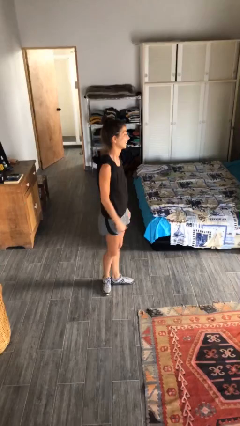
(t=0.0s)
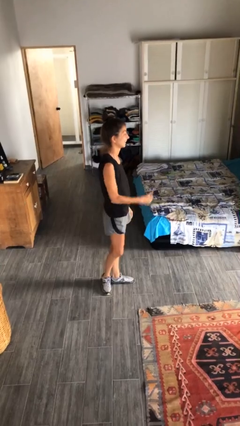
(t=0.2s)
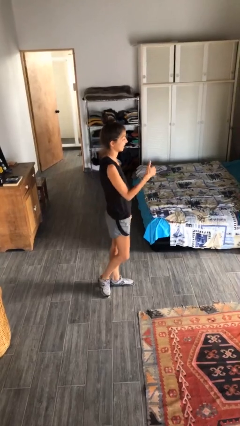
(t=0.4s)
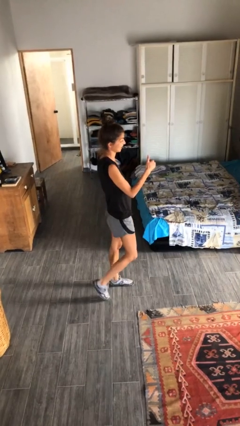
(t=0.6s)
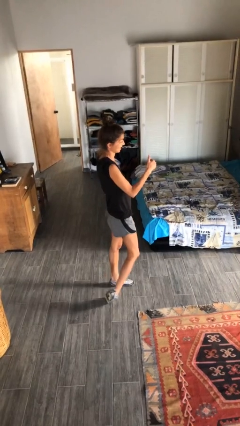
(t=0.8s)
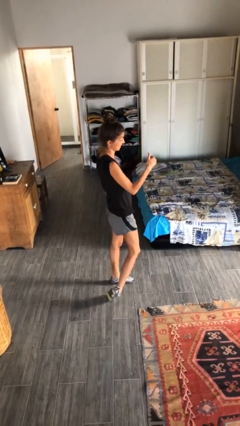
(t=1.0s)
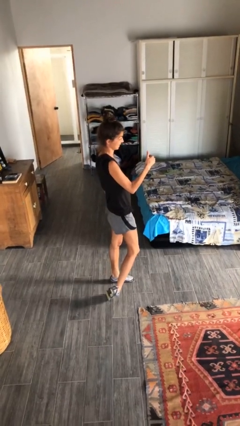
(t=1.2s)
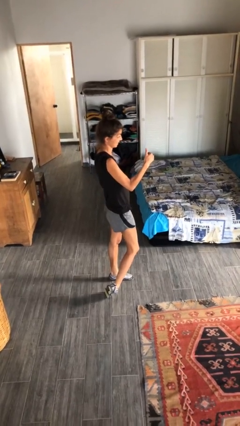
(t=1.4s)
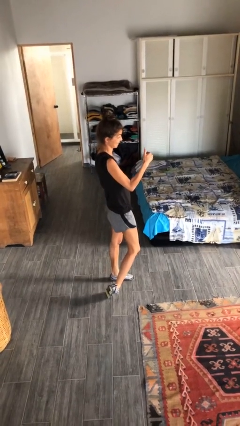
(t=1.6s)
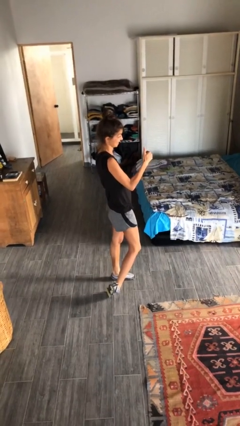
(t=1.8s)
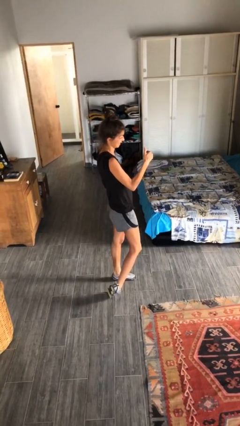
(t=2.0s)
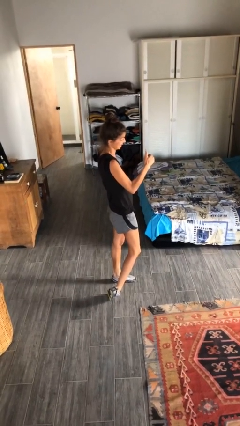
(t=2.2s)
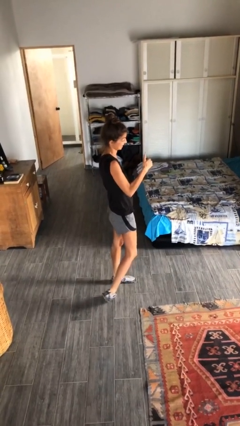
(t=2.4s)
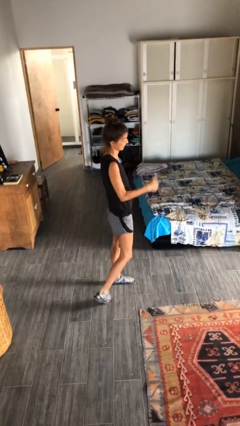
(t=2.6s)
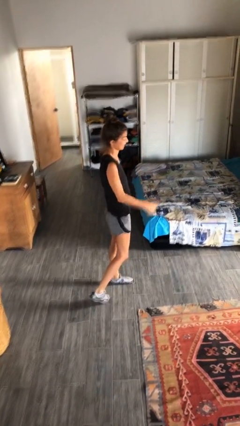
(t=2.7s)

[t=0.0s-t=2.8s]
person gestures thumbs up

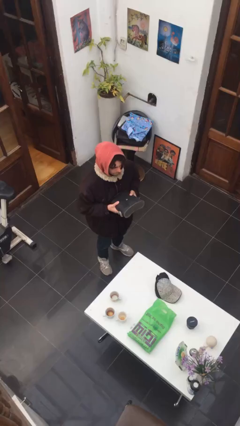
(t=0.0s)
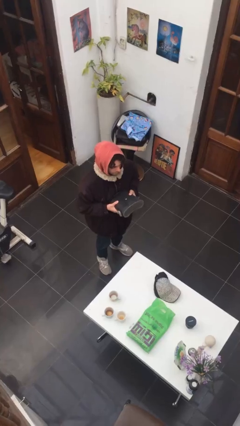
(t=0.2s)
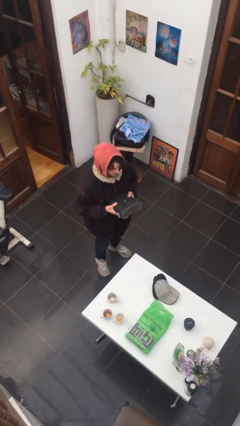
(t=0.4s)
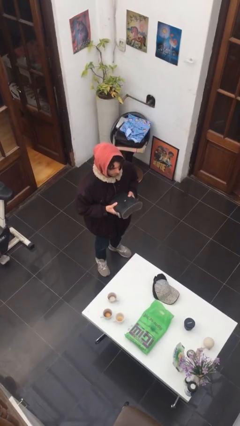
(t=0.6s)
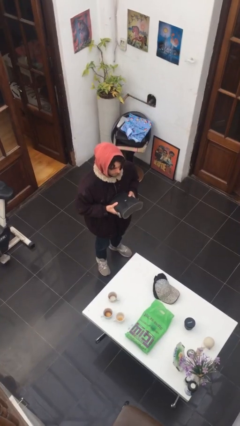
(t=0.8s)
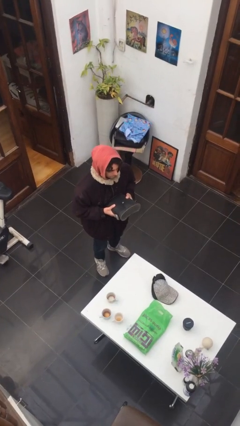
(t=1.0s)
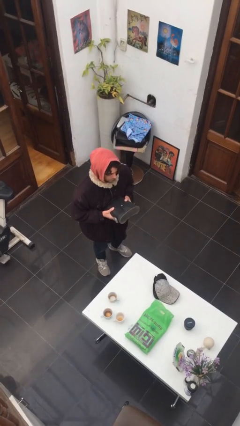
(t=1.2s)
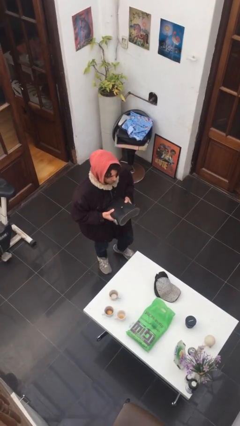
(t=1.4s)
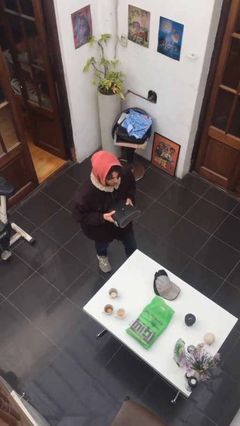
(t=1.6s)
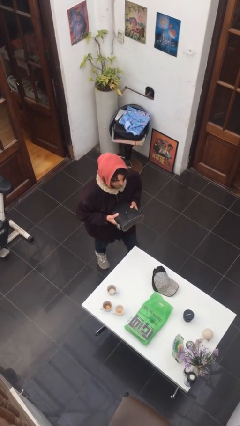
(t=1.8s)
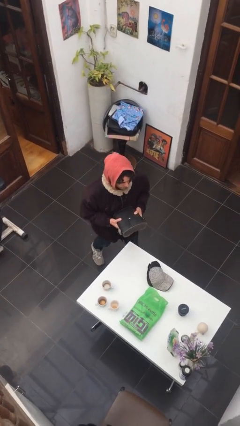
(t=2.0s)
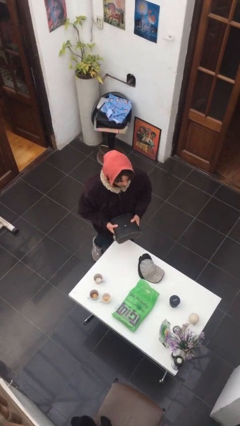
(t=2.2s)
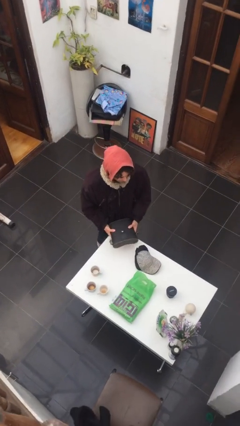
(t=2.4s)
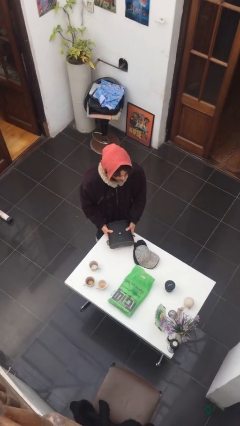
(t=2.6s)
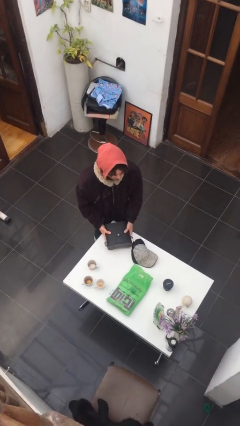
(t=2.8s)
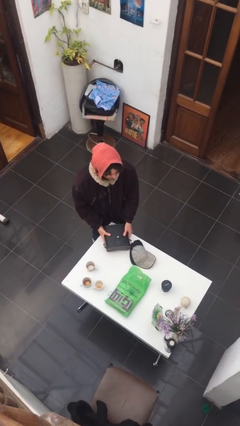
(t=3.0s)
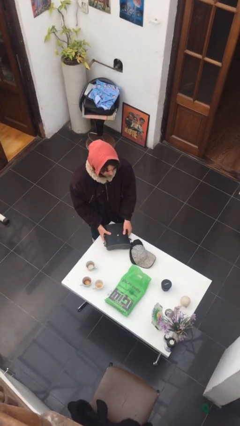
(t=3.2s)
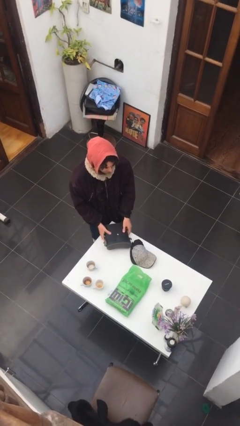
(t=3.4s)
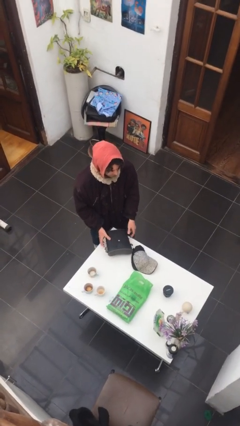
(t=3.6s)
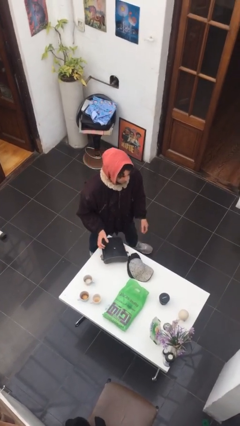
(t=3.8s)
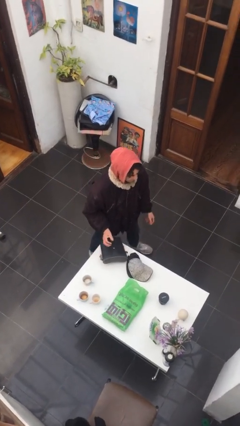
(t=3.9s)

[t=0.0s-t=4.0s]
person puts down object on table

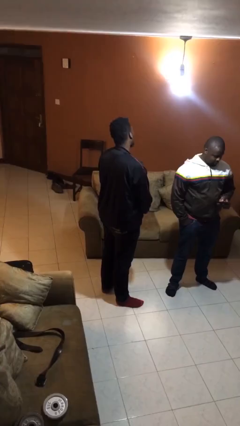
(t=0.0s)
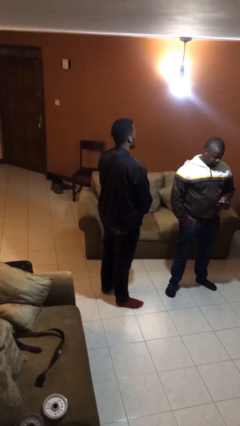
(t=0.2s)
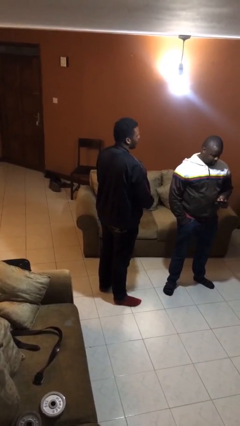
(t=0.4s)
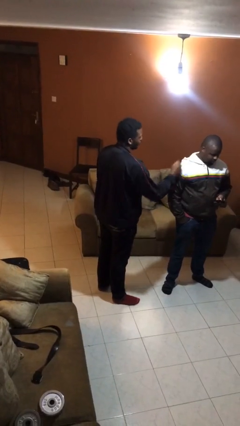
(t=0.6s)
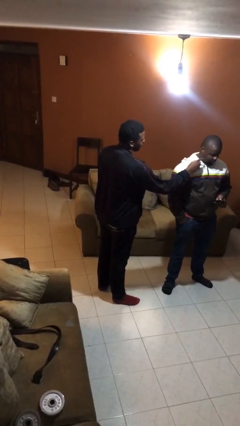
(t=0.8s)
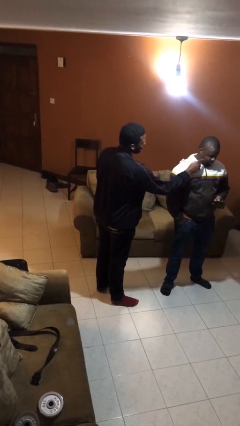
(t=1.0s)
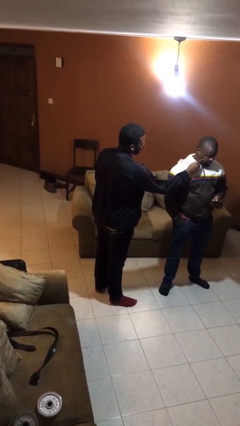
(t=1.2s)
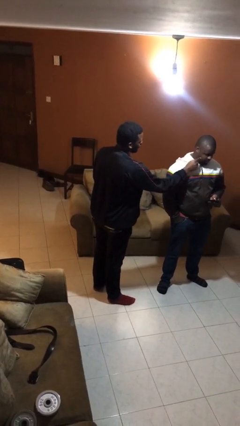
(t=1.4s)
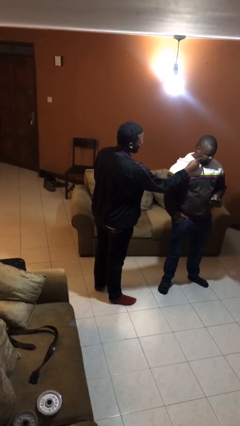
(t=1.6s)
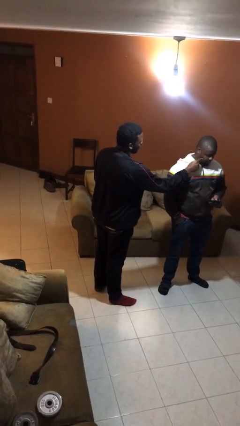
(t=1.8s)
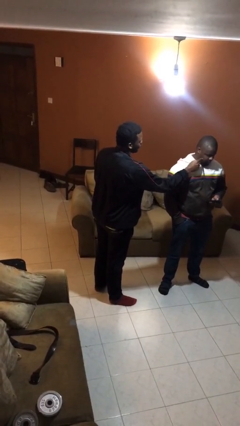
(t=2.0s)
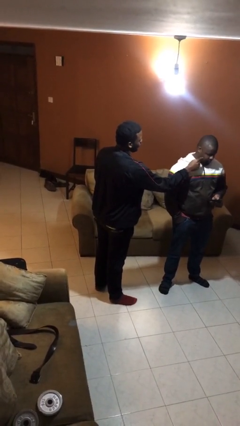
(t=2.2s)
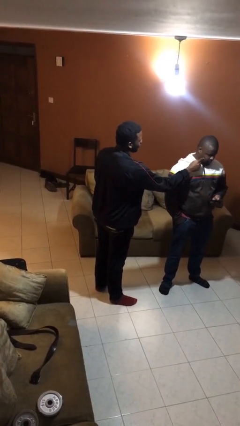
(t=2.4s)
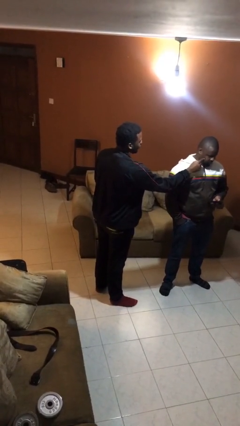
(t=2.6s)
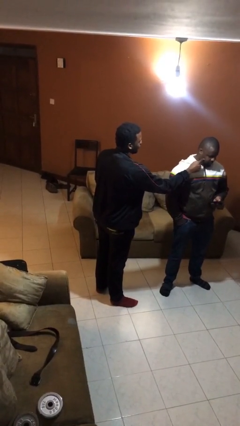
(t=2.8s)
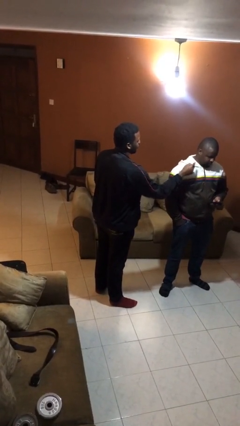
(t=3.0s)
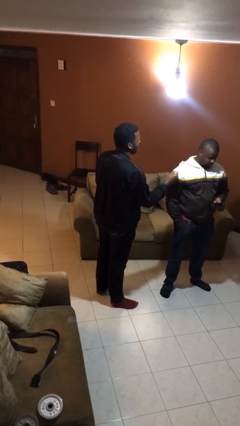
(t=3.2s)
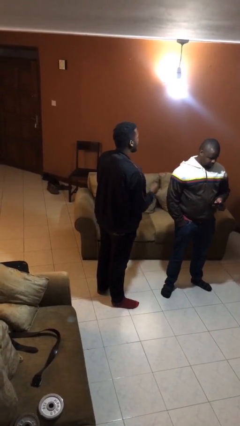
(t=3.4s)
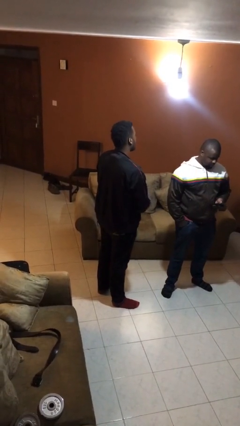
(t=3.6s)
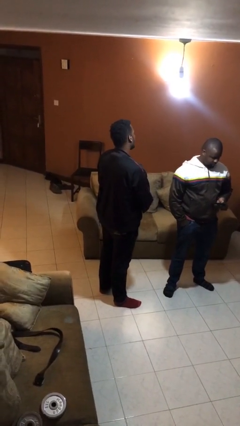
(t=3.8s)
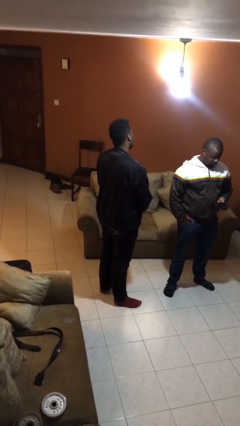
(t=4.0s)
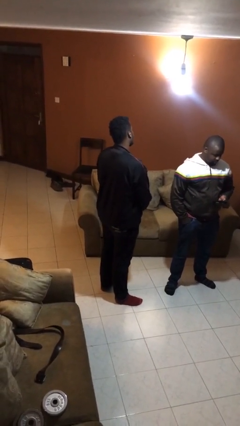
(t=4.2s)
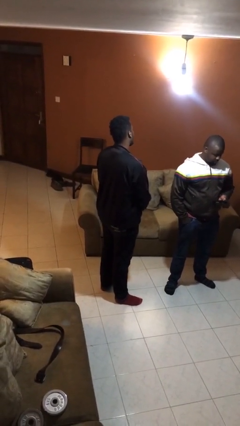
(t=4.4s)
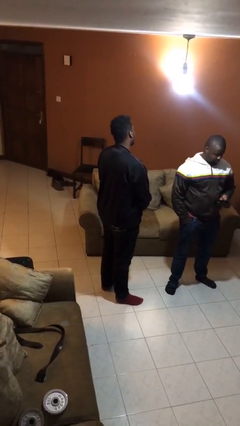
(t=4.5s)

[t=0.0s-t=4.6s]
person touches face of person

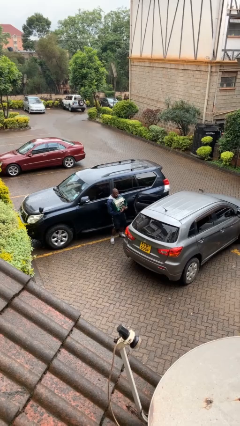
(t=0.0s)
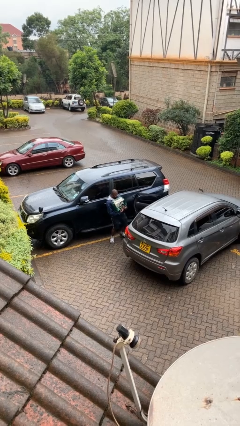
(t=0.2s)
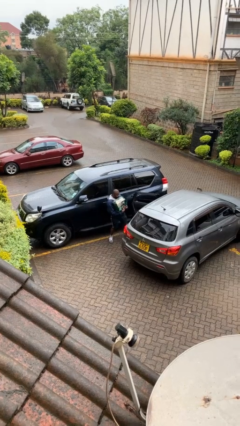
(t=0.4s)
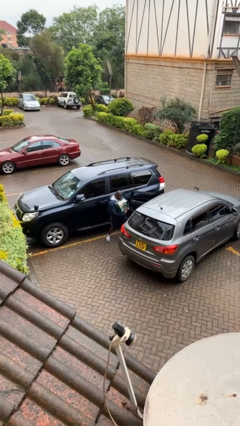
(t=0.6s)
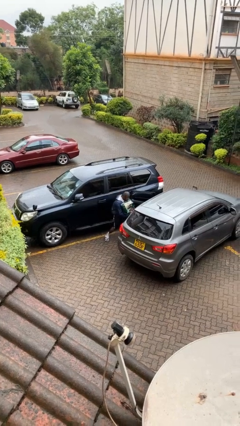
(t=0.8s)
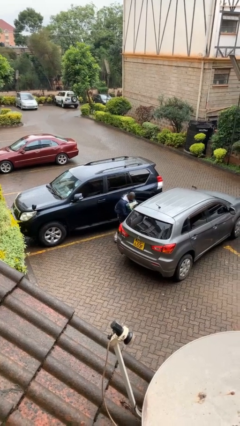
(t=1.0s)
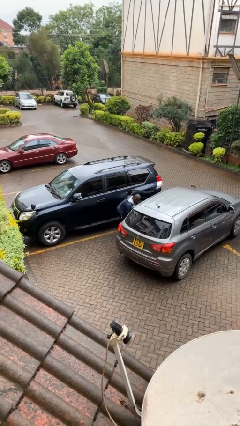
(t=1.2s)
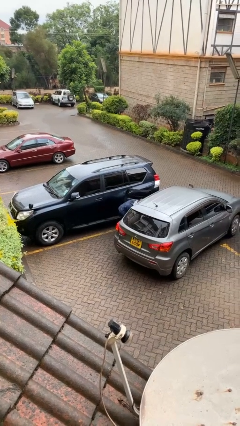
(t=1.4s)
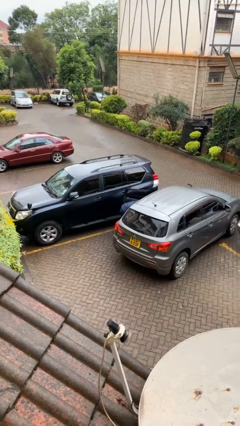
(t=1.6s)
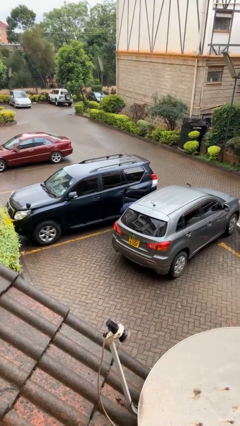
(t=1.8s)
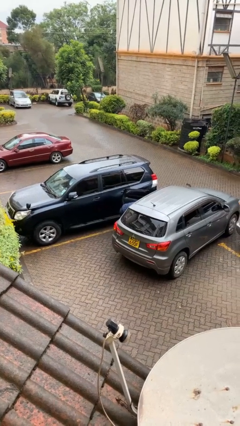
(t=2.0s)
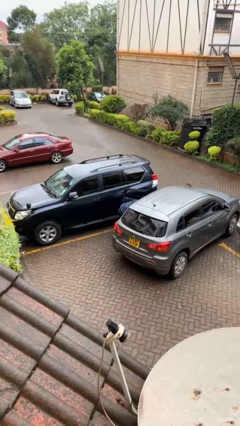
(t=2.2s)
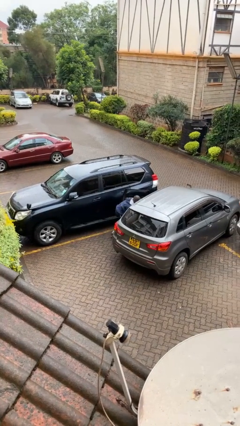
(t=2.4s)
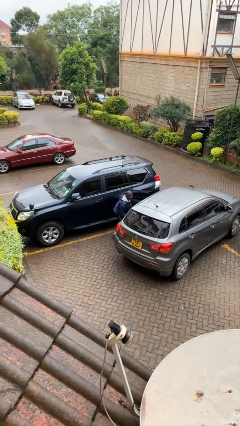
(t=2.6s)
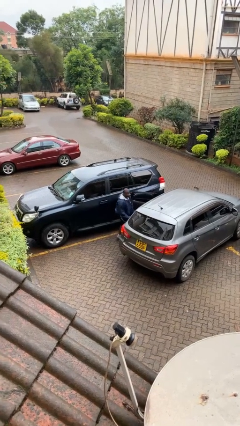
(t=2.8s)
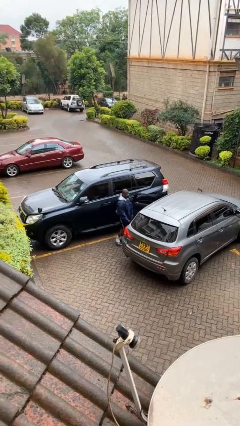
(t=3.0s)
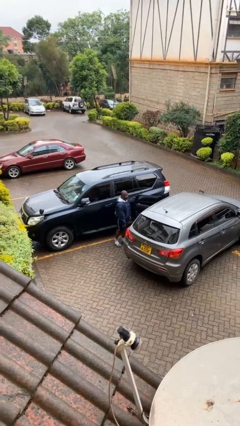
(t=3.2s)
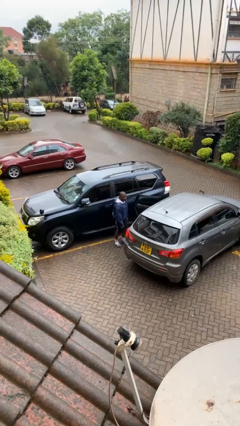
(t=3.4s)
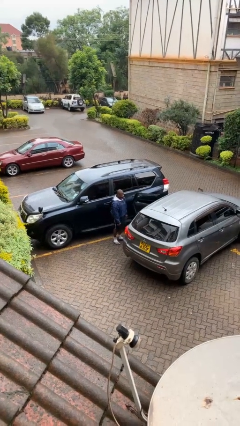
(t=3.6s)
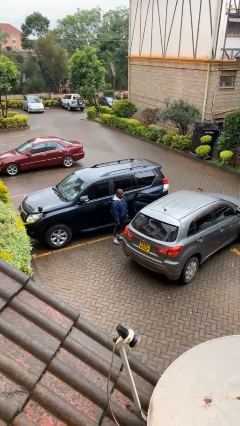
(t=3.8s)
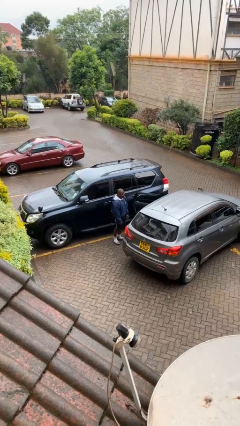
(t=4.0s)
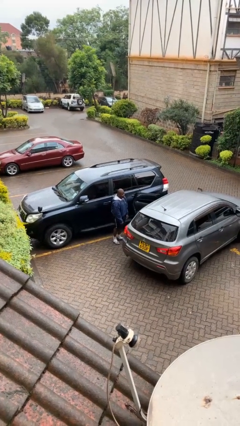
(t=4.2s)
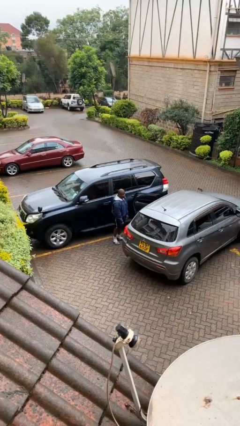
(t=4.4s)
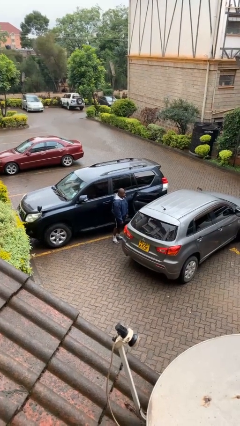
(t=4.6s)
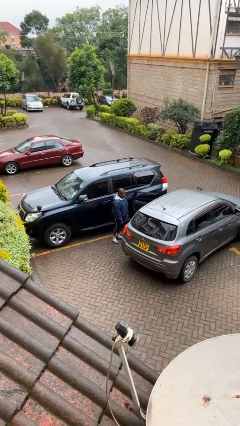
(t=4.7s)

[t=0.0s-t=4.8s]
person loads car

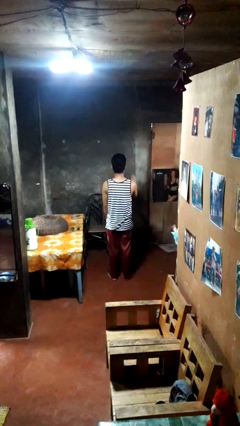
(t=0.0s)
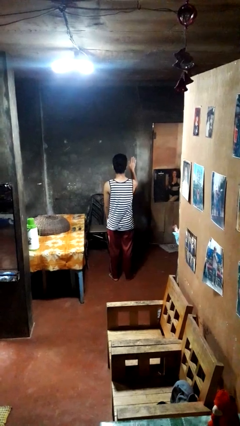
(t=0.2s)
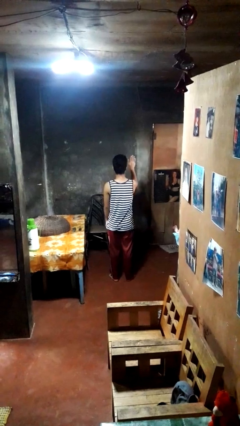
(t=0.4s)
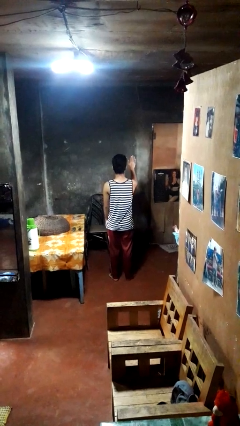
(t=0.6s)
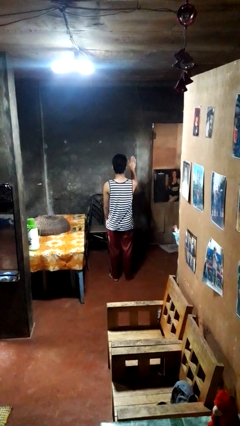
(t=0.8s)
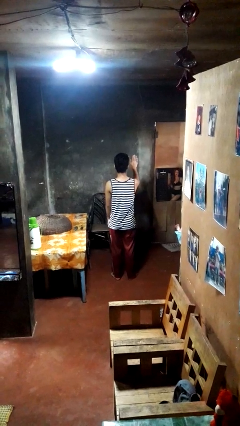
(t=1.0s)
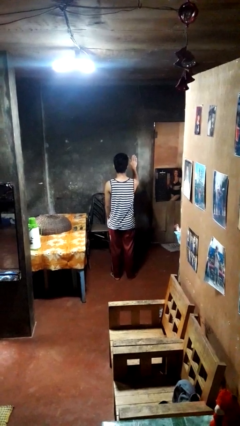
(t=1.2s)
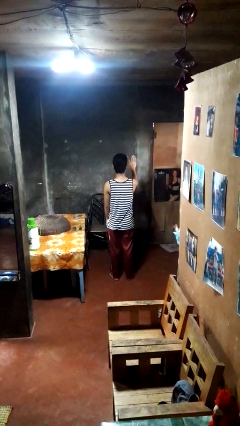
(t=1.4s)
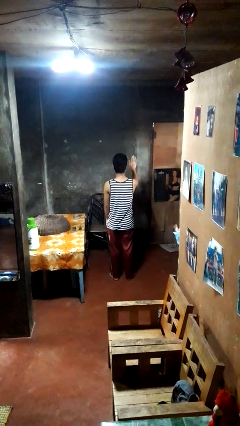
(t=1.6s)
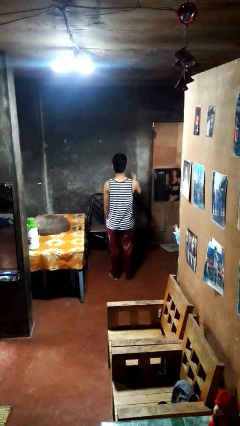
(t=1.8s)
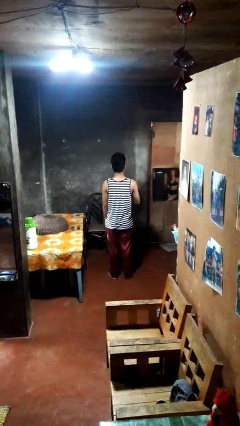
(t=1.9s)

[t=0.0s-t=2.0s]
person gestures stop
